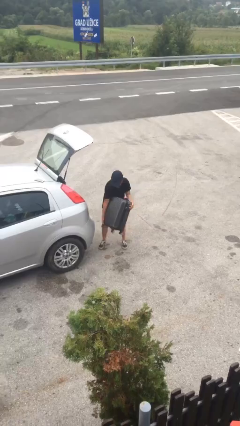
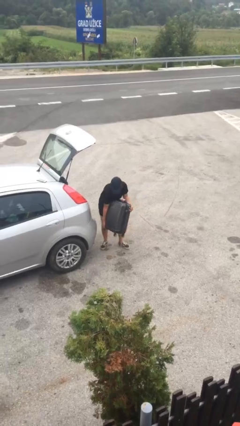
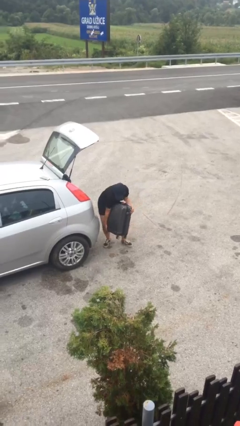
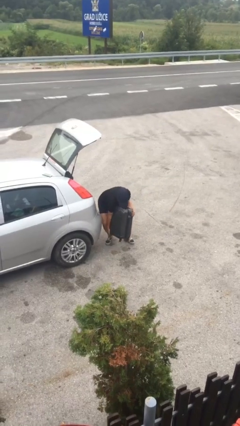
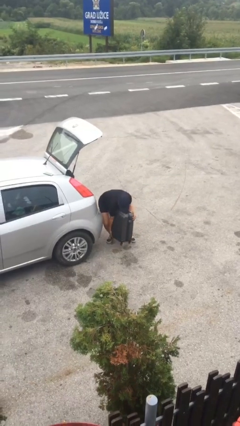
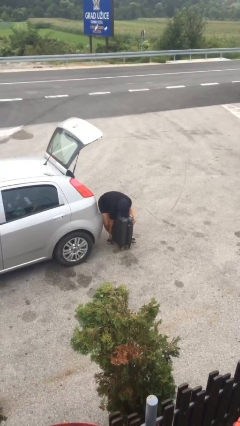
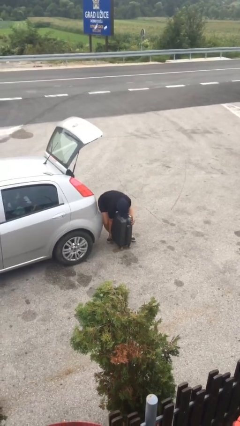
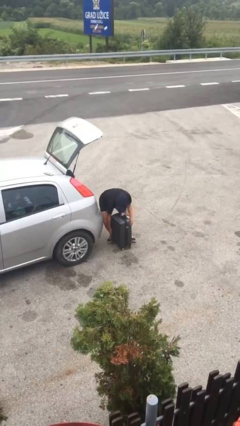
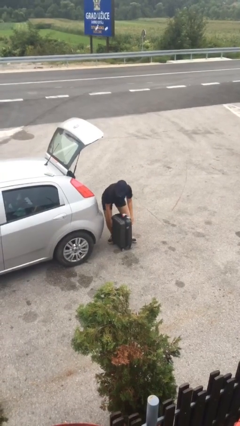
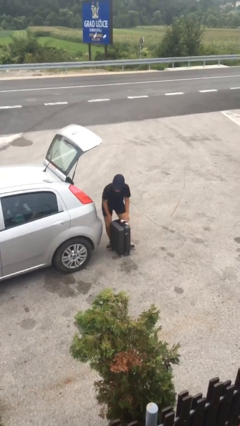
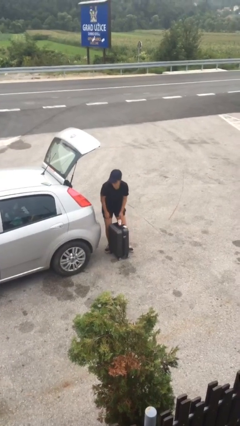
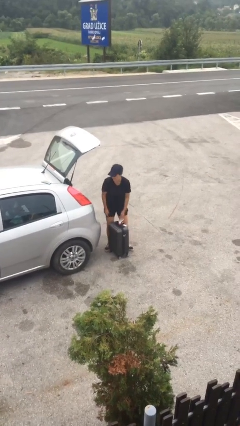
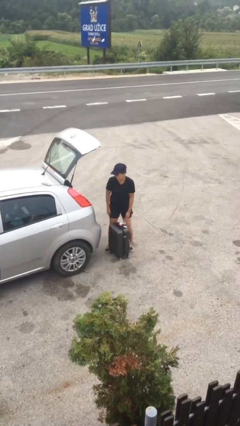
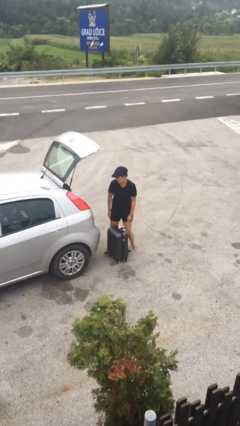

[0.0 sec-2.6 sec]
person puts down object on floor

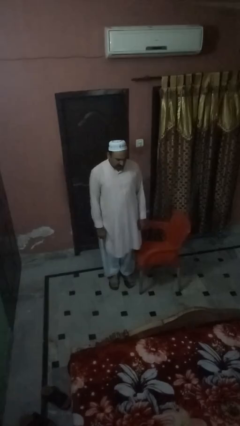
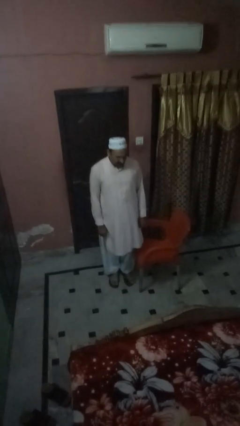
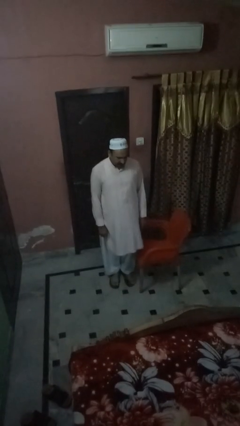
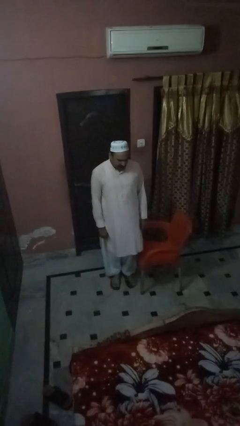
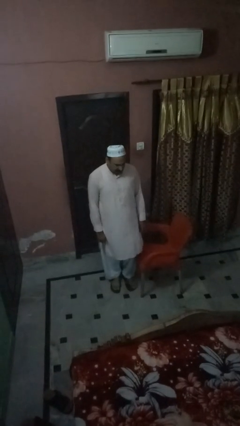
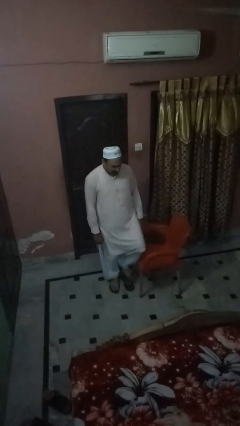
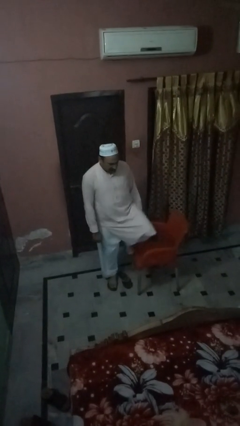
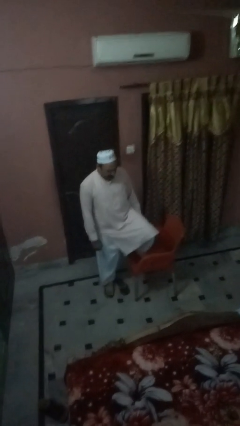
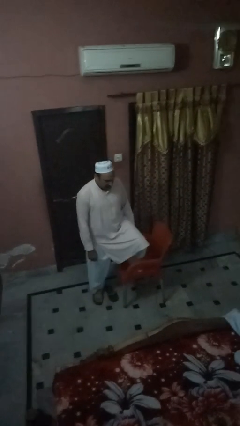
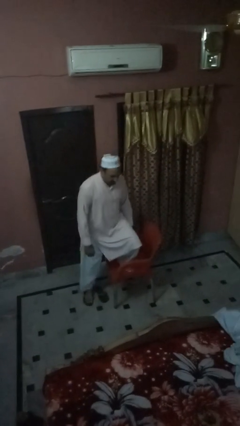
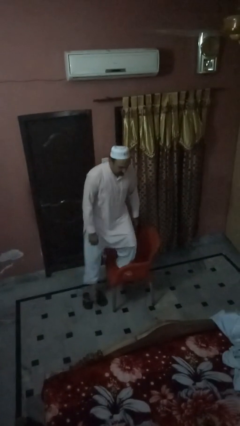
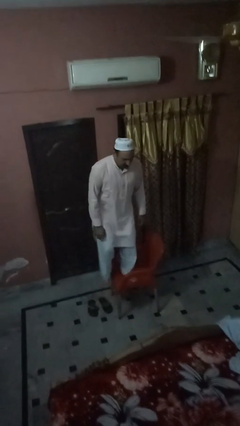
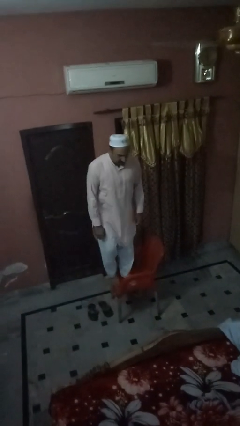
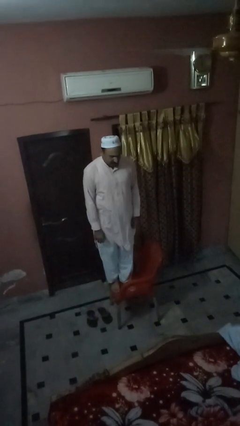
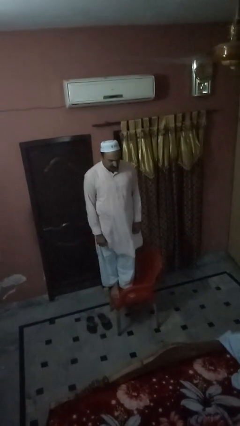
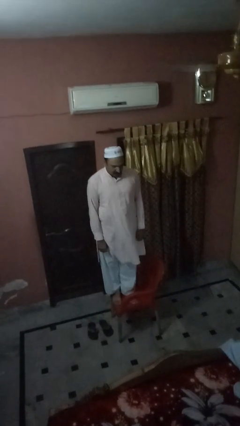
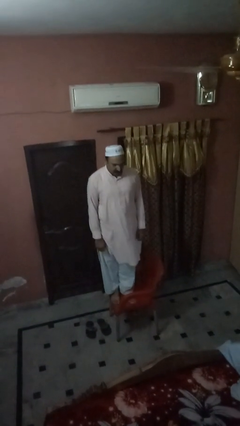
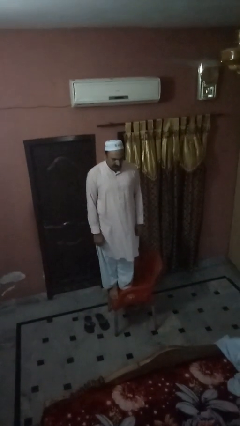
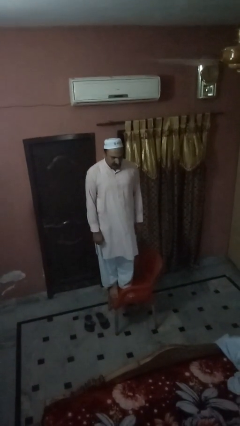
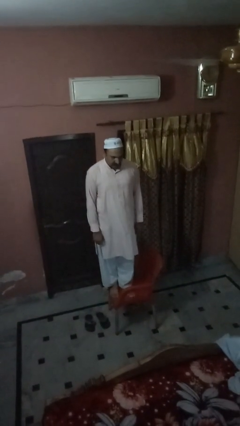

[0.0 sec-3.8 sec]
person climbs on chair

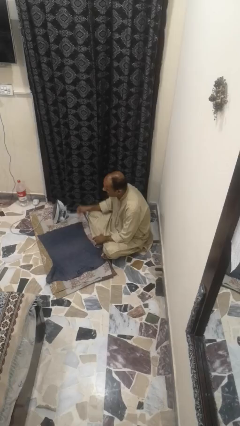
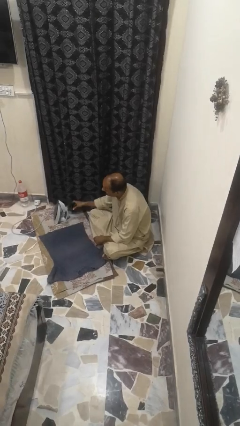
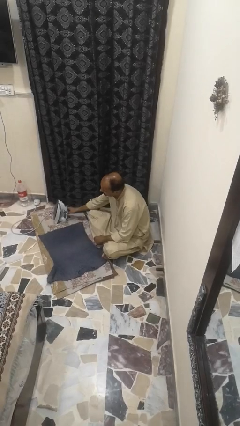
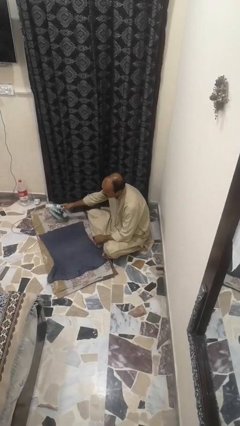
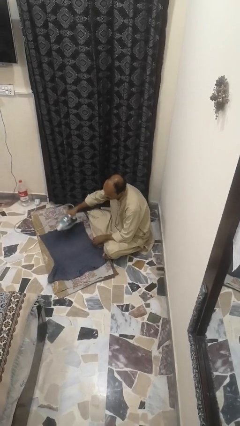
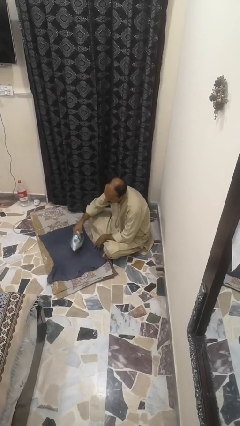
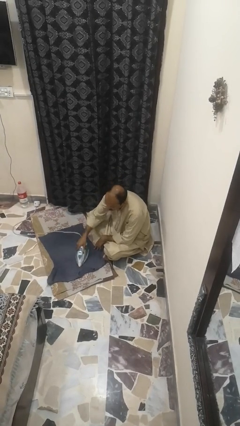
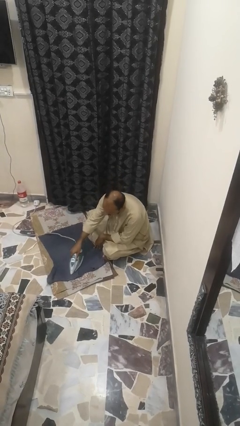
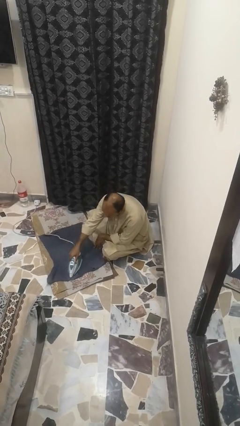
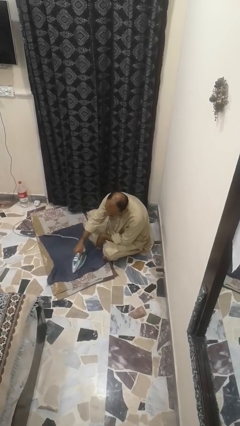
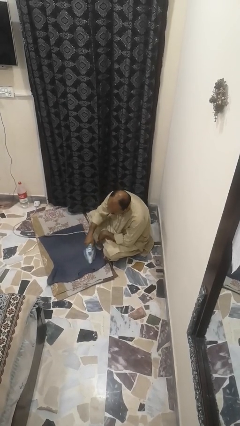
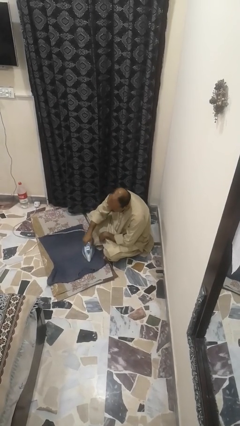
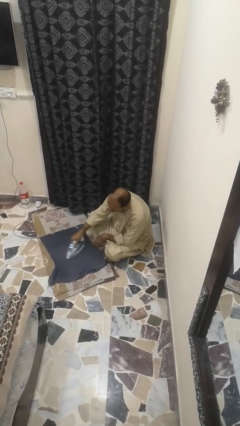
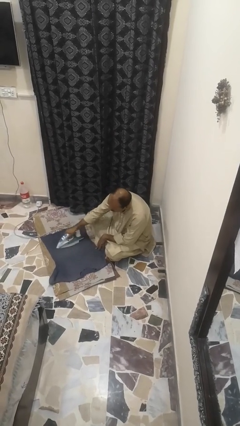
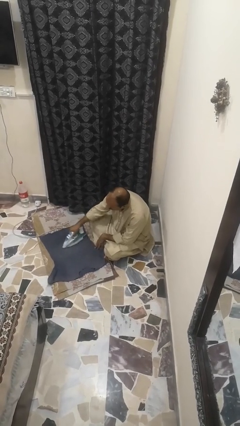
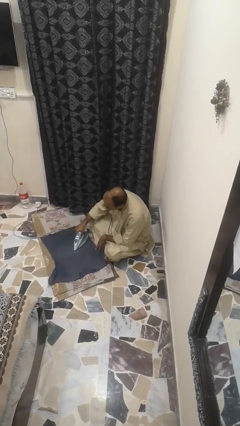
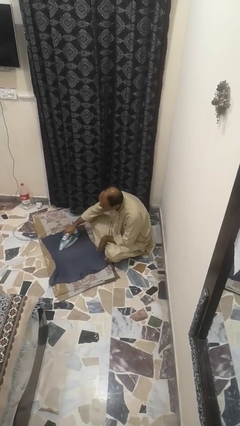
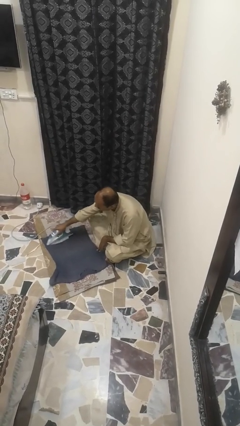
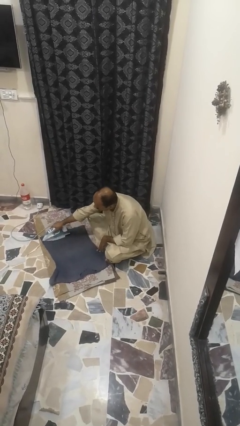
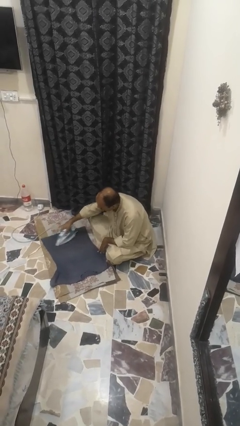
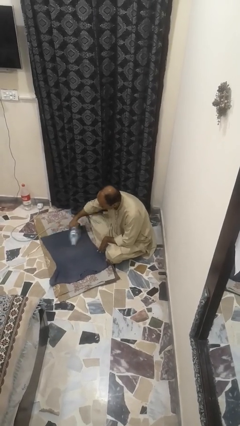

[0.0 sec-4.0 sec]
person irons clothes

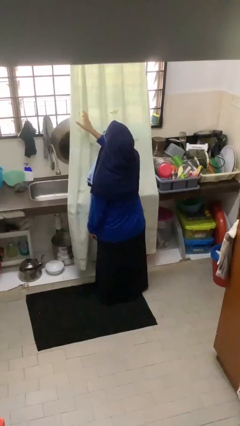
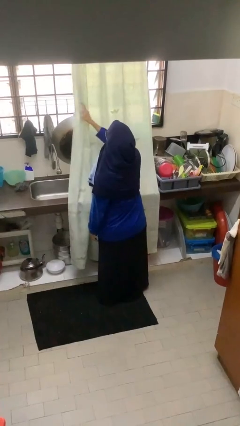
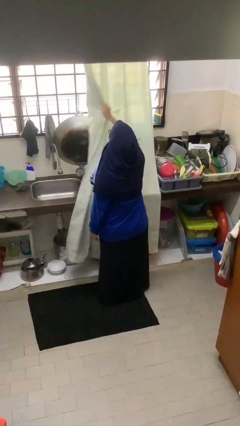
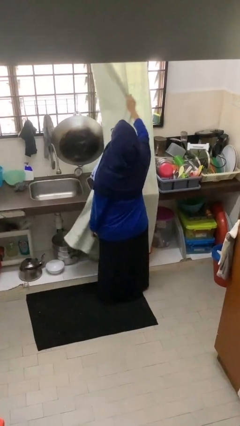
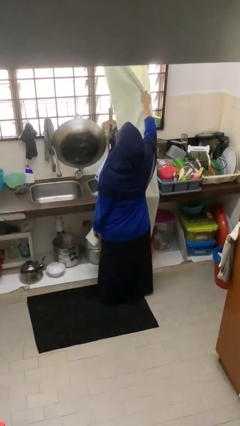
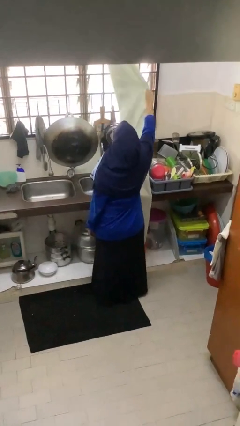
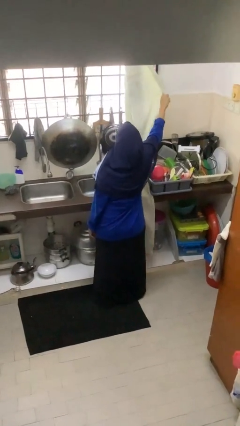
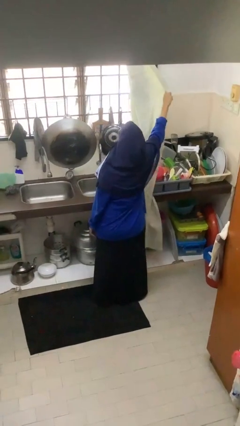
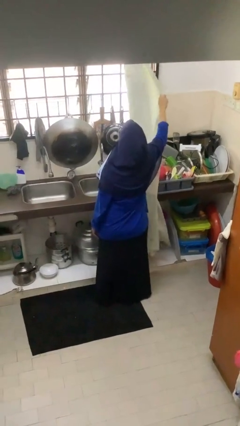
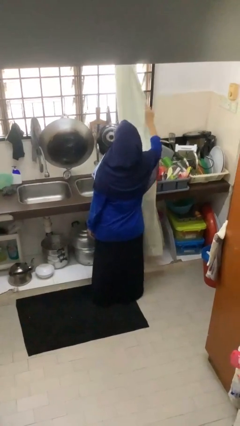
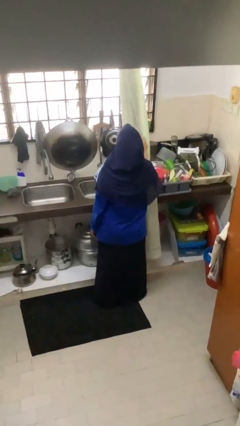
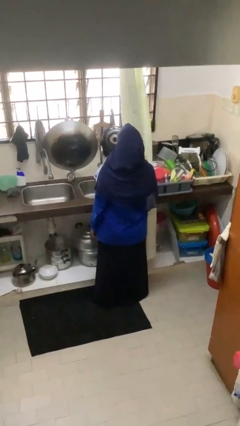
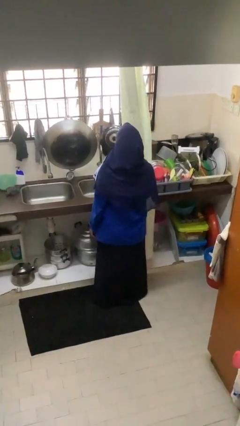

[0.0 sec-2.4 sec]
person opens curtains

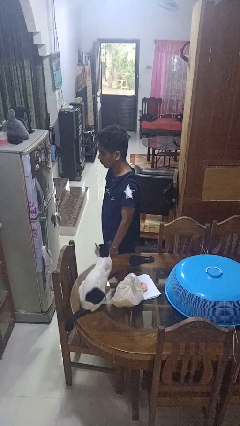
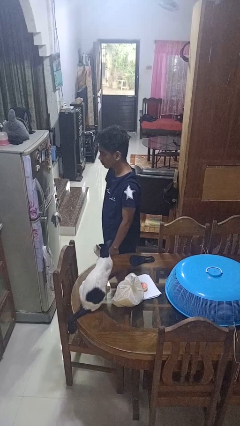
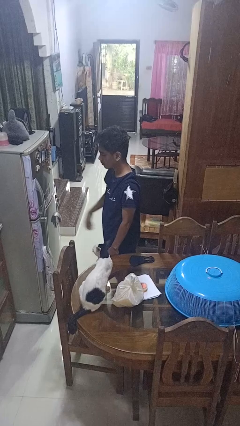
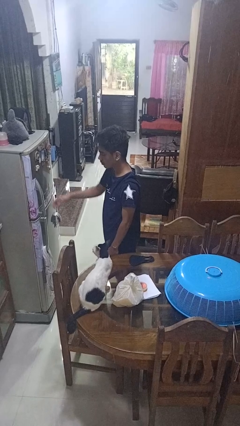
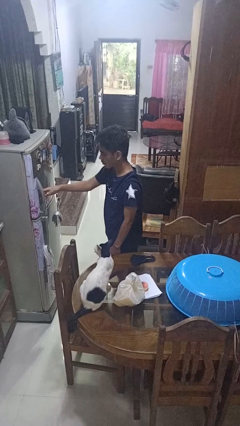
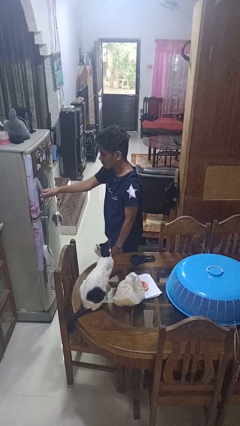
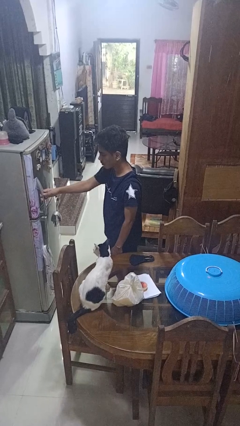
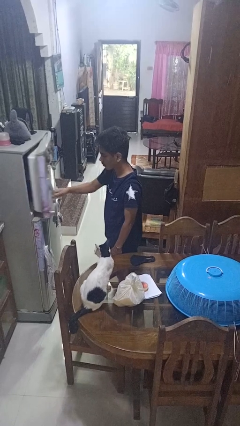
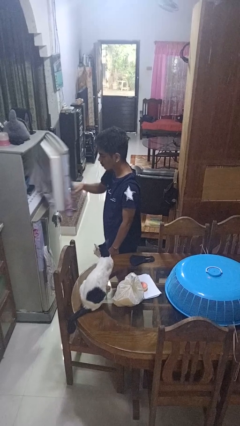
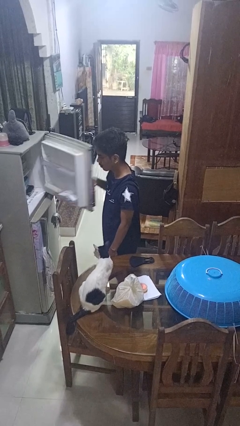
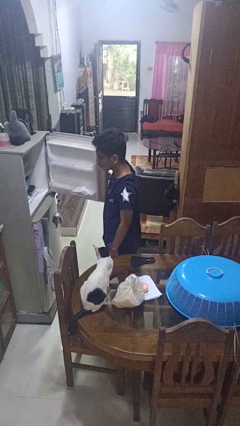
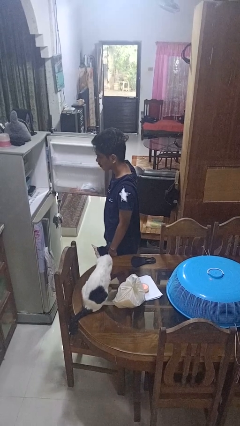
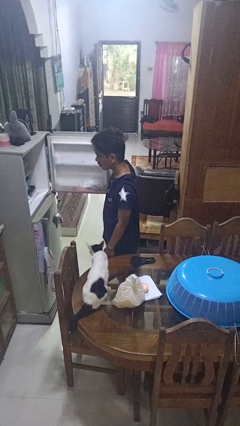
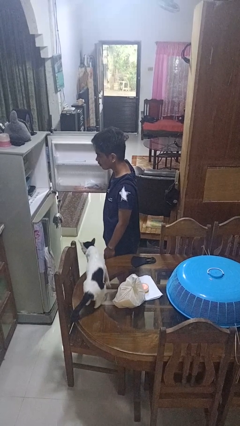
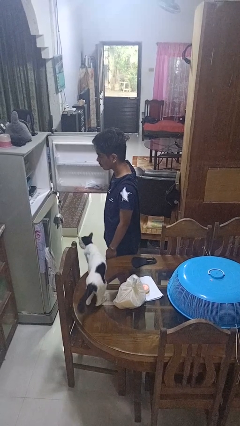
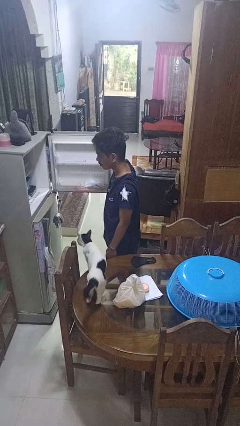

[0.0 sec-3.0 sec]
person opens refrigerator

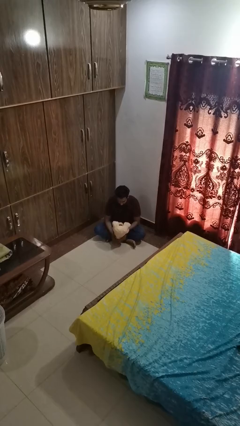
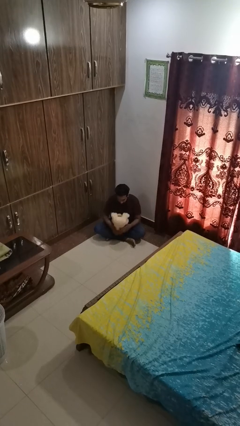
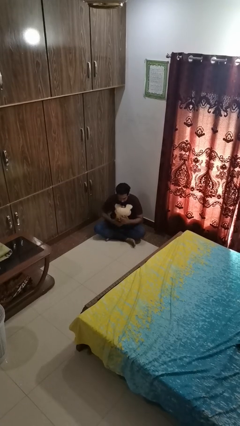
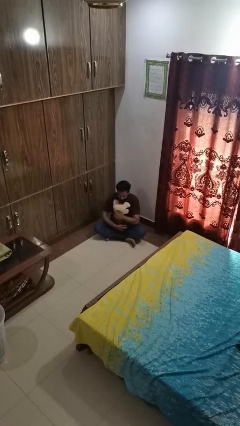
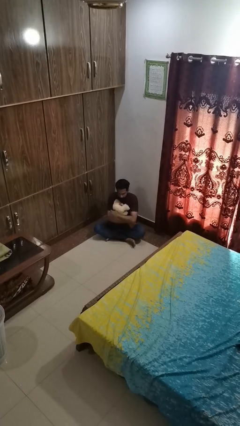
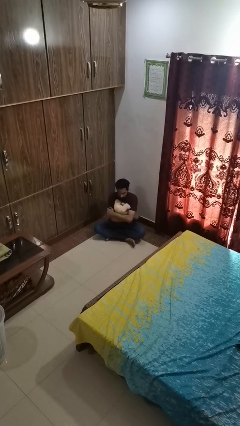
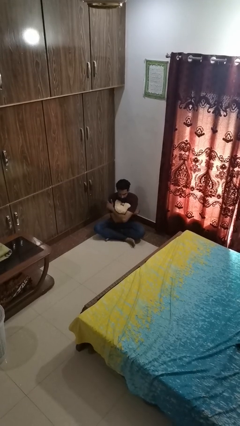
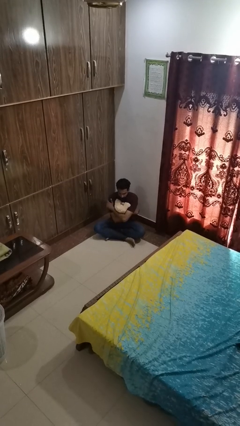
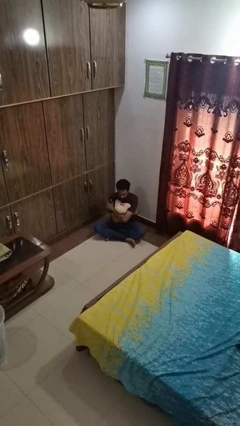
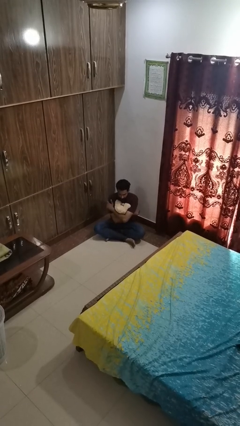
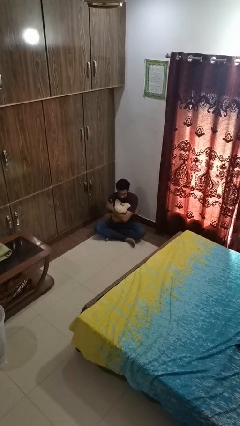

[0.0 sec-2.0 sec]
person hugs stuffed animal
